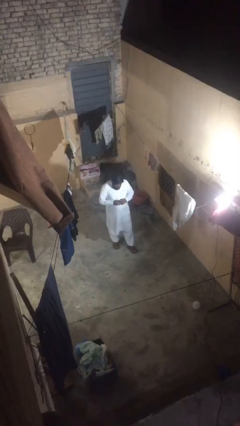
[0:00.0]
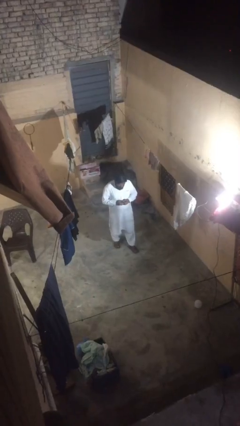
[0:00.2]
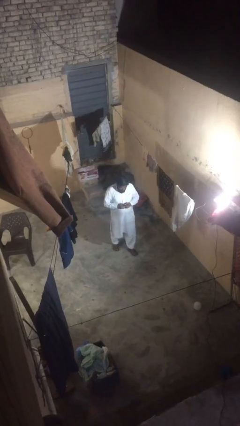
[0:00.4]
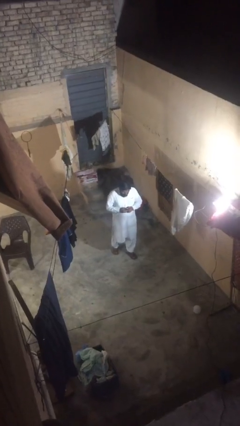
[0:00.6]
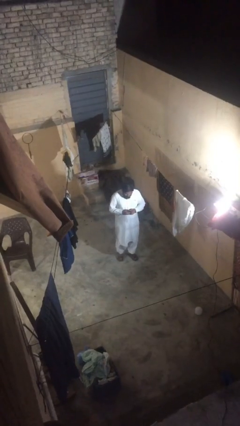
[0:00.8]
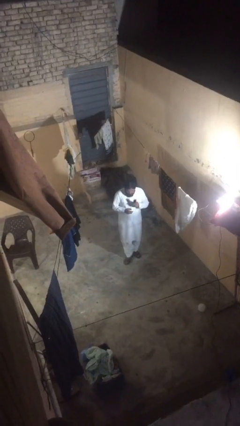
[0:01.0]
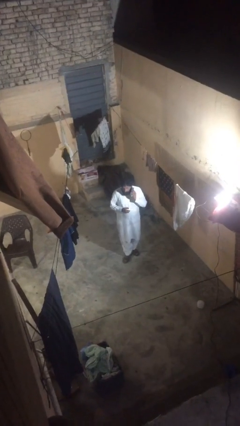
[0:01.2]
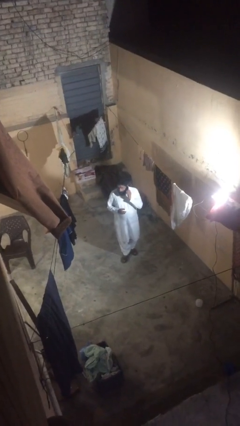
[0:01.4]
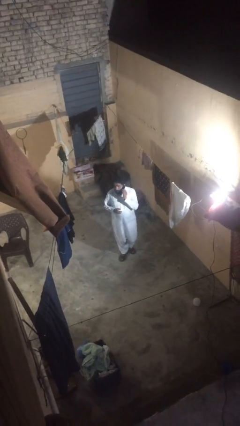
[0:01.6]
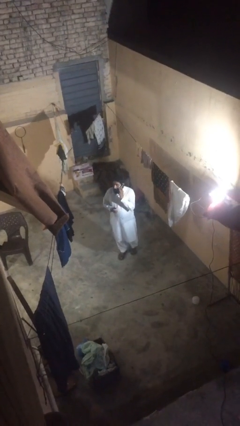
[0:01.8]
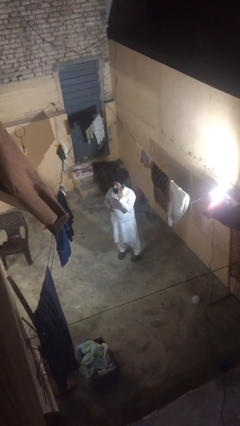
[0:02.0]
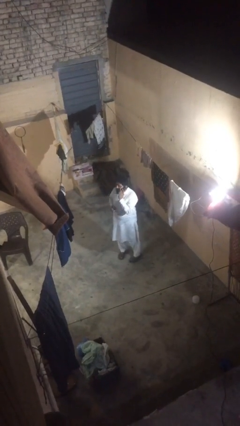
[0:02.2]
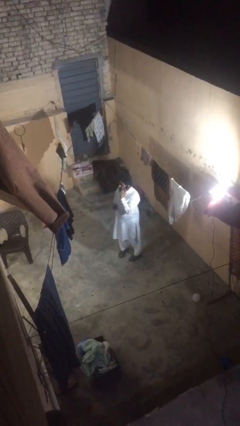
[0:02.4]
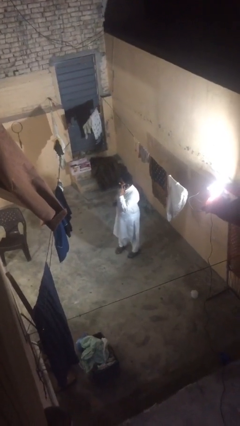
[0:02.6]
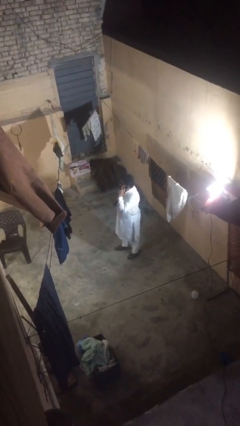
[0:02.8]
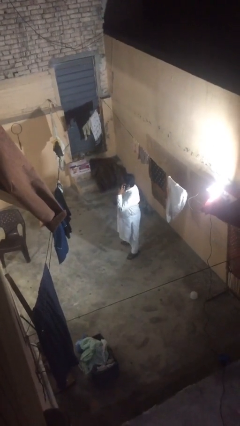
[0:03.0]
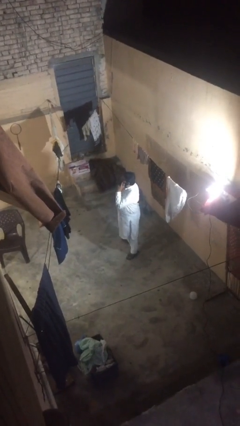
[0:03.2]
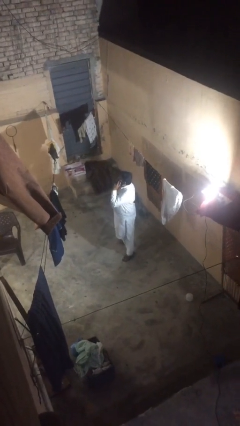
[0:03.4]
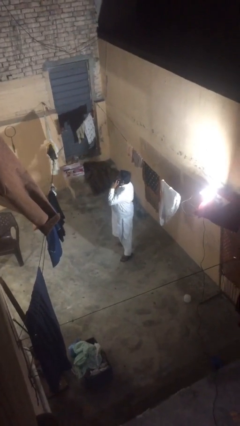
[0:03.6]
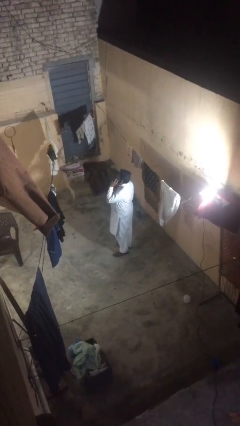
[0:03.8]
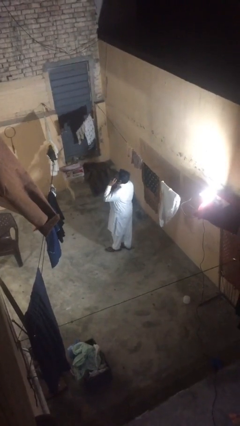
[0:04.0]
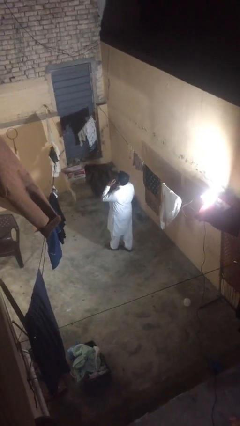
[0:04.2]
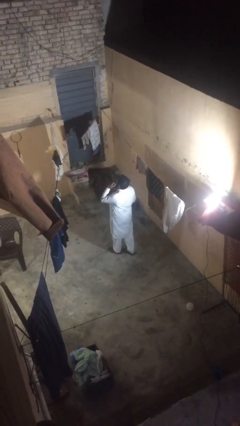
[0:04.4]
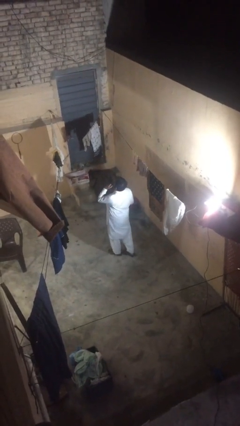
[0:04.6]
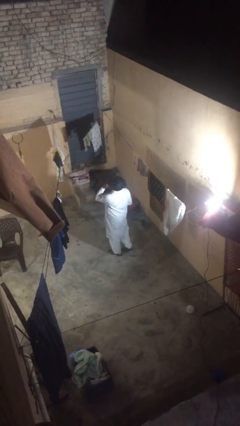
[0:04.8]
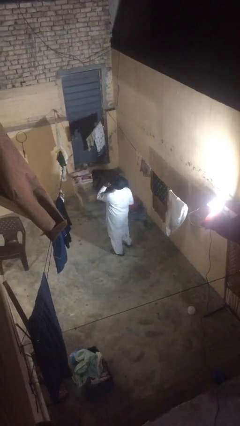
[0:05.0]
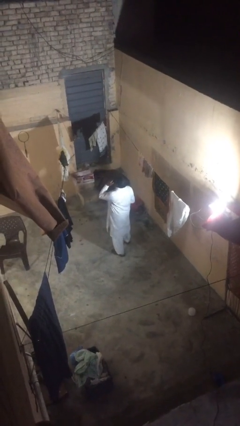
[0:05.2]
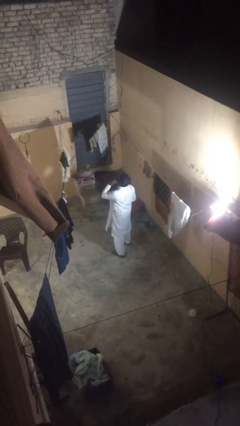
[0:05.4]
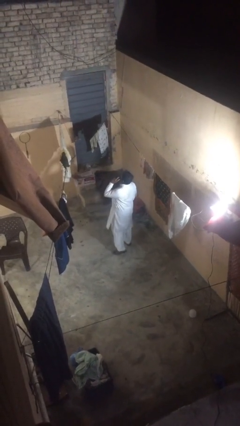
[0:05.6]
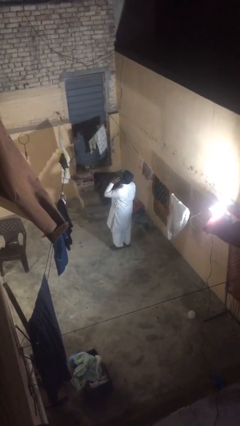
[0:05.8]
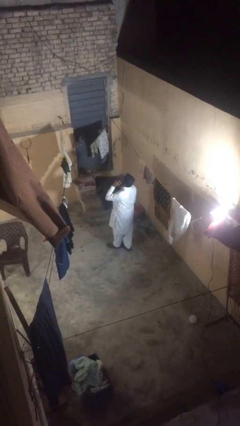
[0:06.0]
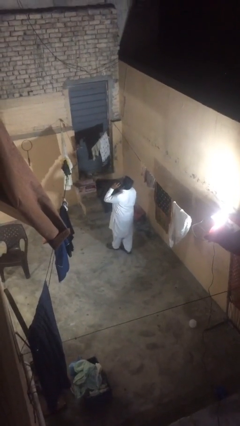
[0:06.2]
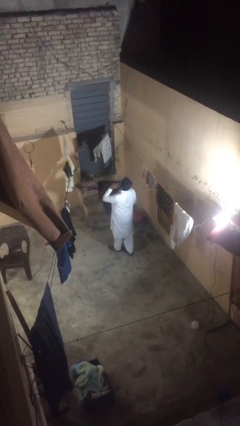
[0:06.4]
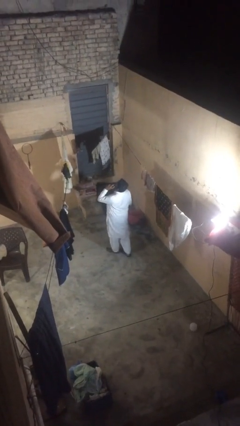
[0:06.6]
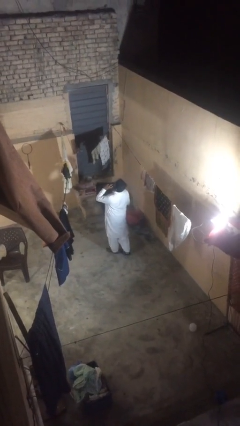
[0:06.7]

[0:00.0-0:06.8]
person talks on phone

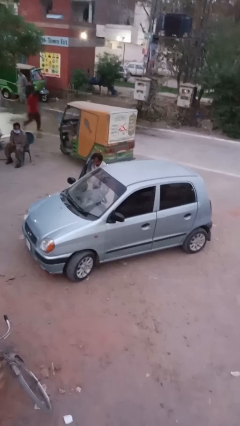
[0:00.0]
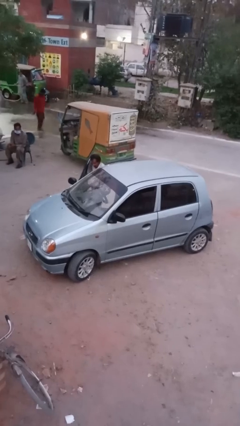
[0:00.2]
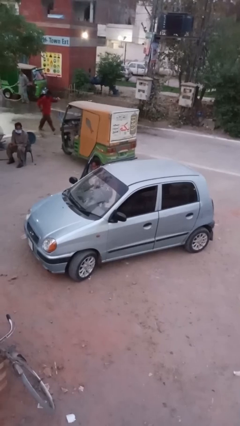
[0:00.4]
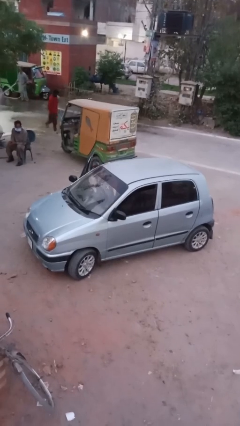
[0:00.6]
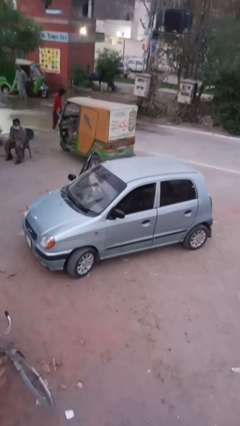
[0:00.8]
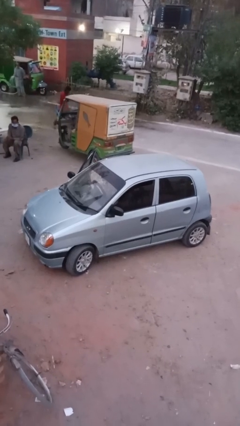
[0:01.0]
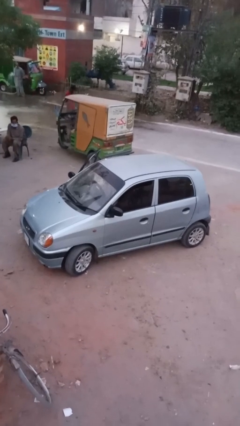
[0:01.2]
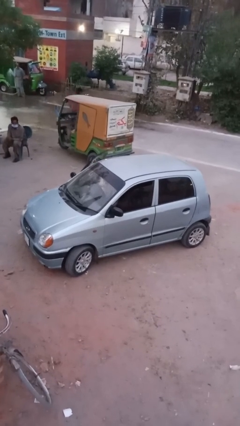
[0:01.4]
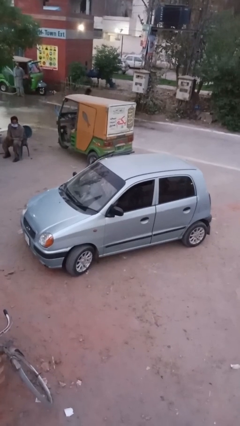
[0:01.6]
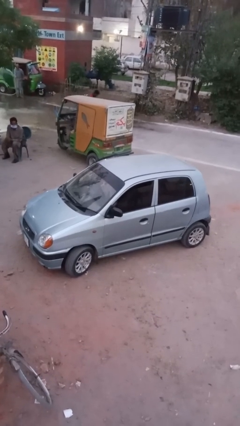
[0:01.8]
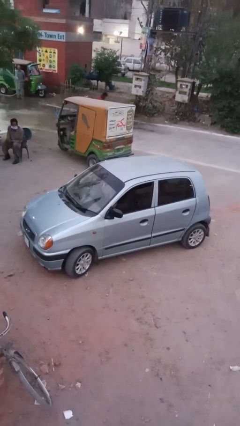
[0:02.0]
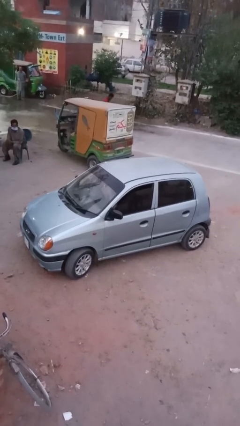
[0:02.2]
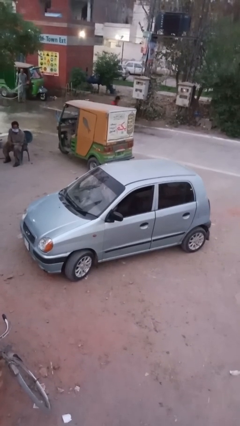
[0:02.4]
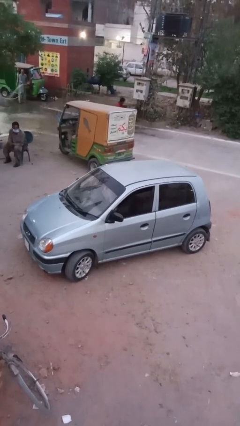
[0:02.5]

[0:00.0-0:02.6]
person opens facility door

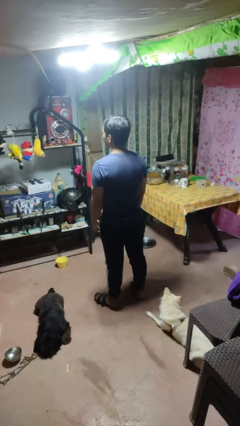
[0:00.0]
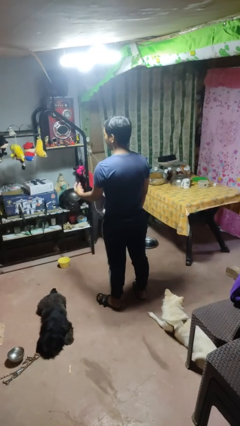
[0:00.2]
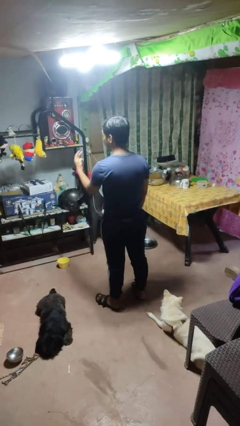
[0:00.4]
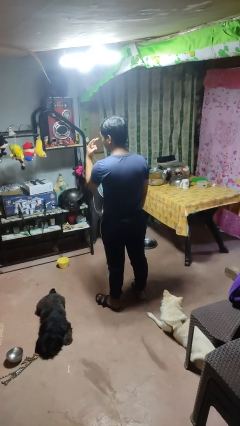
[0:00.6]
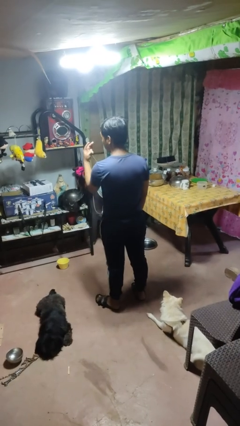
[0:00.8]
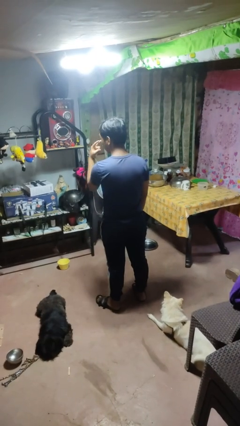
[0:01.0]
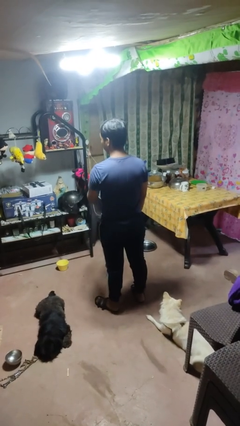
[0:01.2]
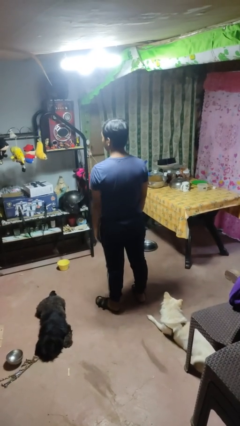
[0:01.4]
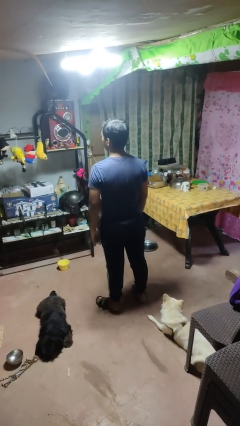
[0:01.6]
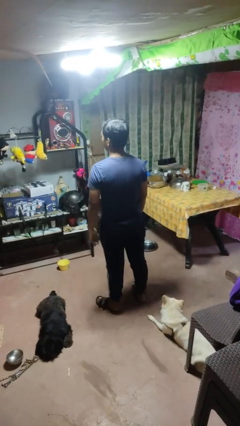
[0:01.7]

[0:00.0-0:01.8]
person gestures watch closely

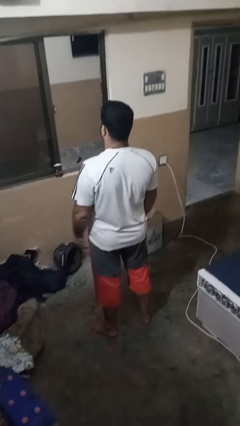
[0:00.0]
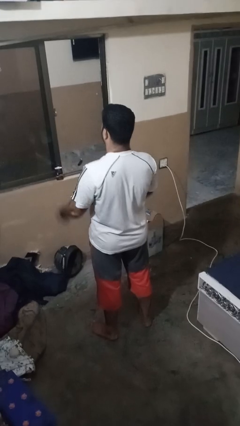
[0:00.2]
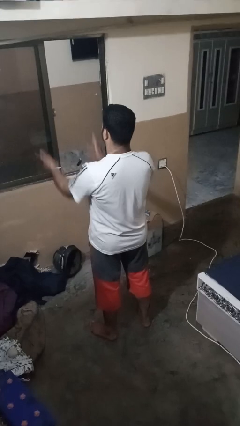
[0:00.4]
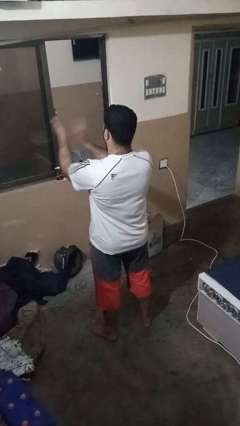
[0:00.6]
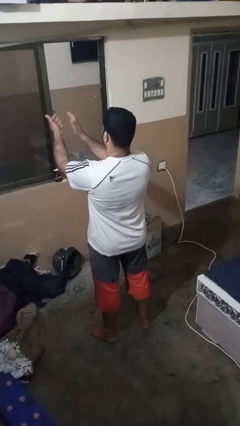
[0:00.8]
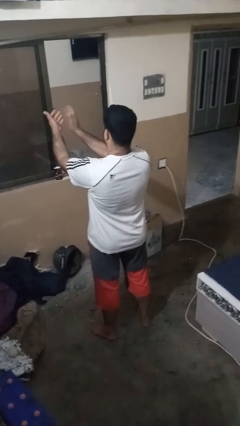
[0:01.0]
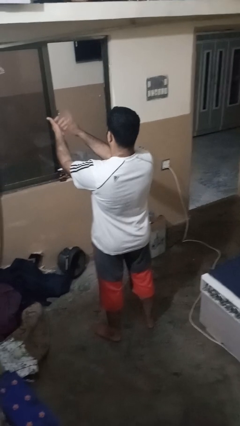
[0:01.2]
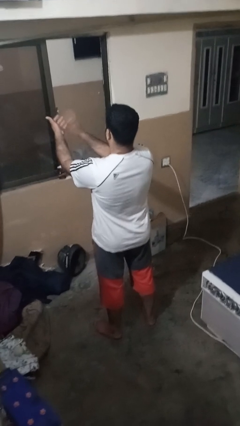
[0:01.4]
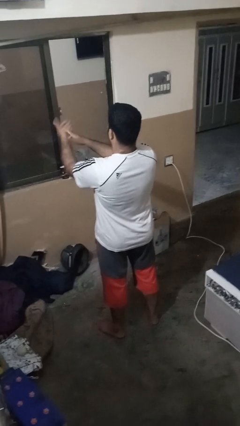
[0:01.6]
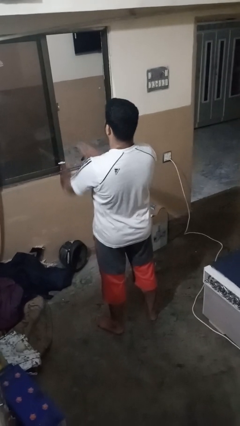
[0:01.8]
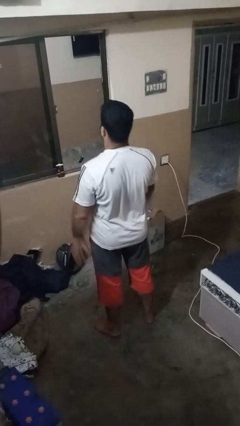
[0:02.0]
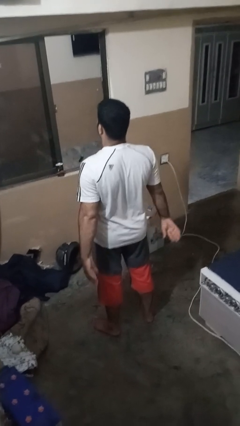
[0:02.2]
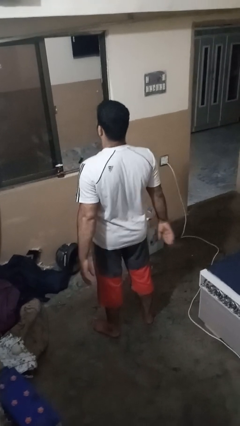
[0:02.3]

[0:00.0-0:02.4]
person claps hands

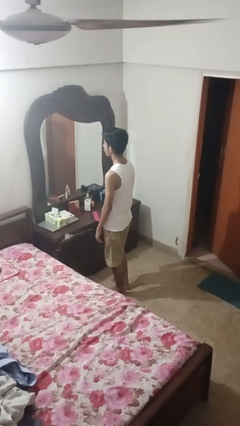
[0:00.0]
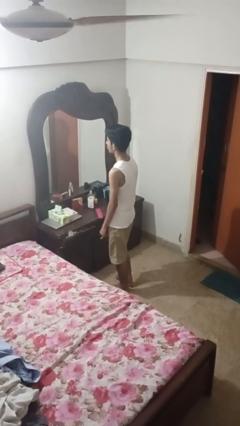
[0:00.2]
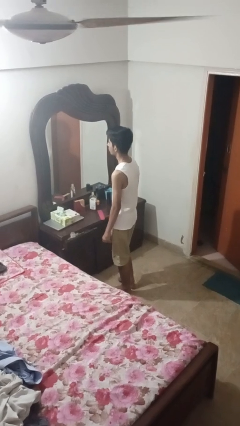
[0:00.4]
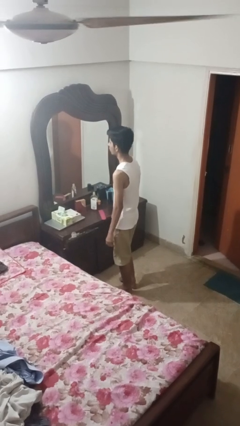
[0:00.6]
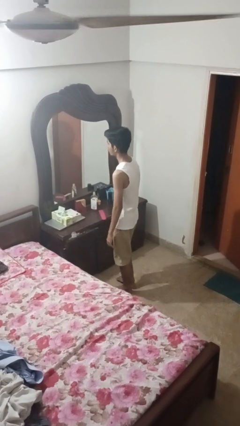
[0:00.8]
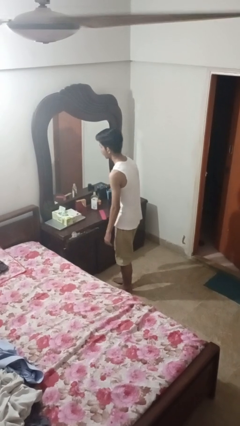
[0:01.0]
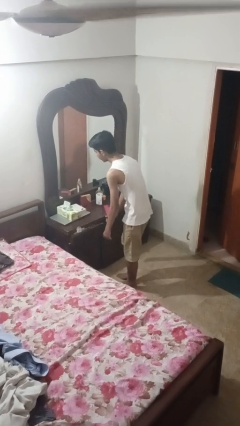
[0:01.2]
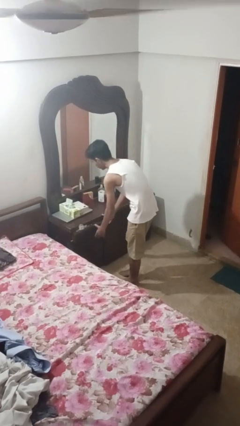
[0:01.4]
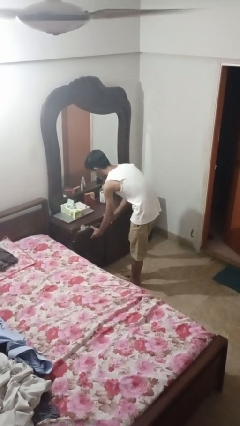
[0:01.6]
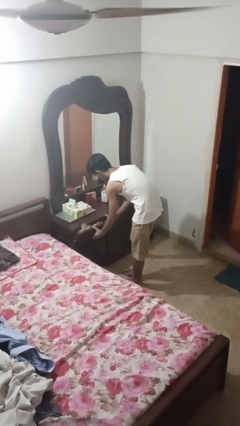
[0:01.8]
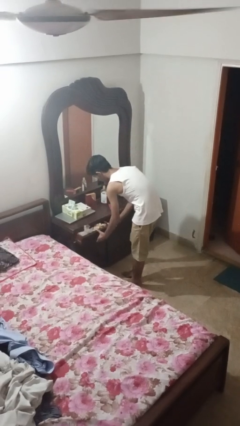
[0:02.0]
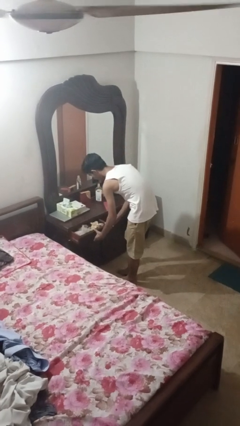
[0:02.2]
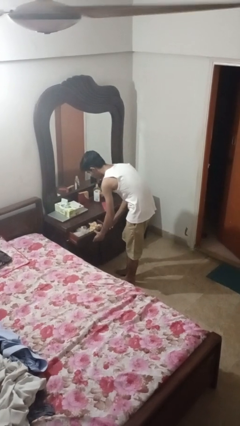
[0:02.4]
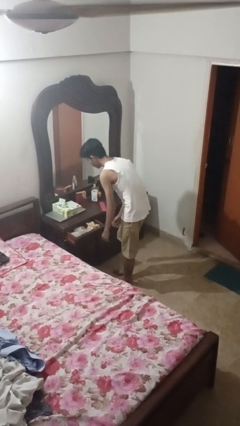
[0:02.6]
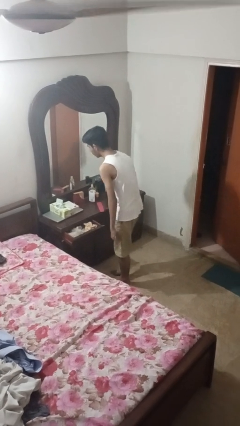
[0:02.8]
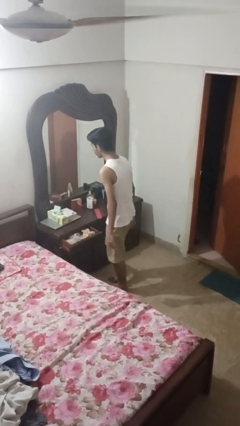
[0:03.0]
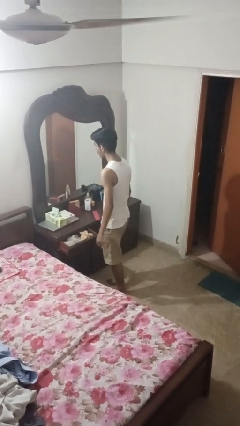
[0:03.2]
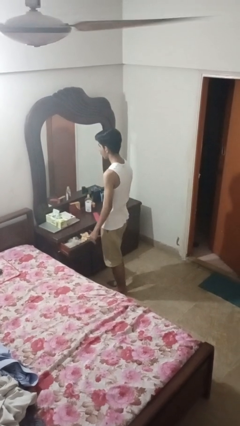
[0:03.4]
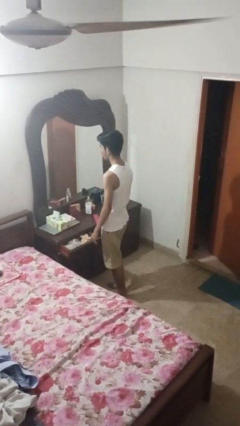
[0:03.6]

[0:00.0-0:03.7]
person opens dresser drawer
